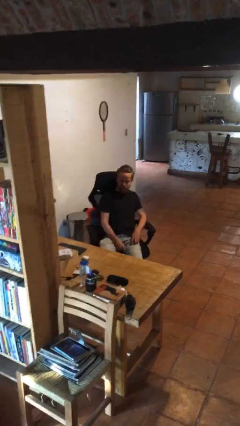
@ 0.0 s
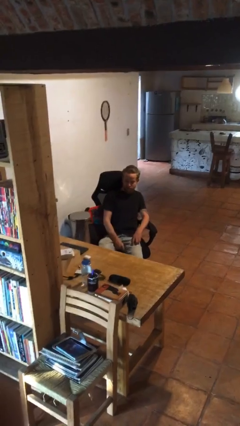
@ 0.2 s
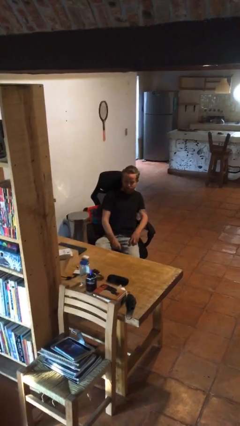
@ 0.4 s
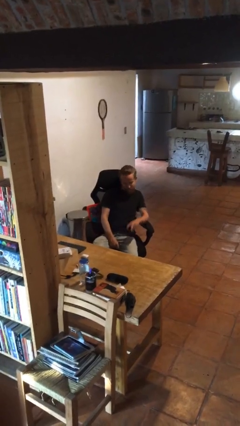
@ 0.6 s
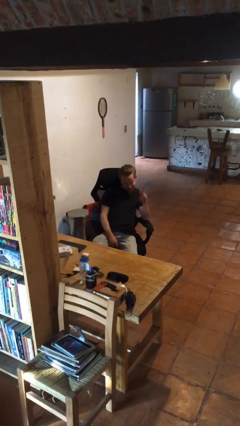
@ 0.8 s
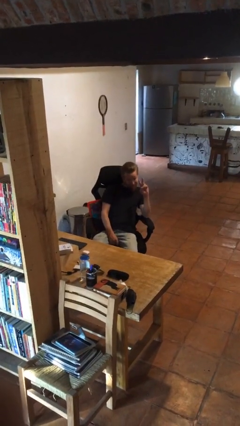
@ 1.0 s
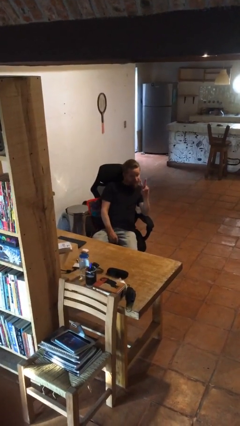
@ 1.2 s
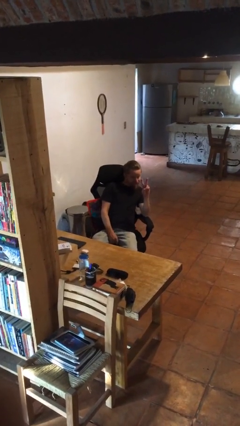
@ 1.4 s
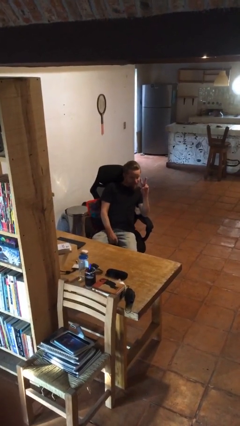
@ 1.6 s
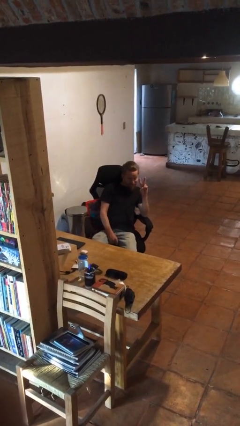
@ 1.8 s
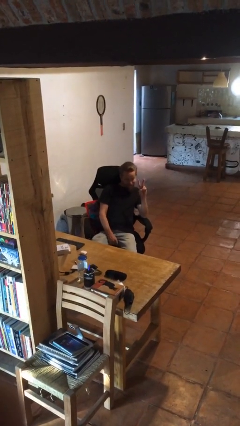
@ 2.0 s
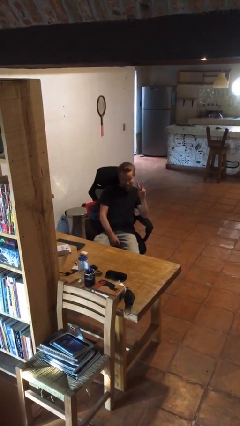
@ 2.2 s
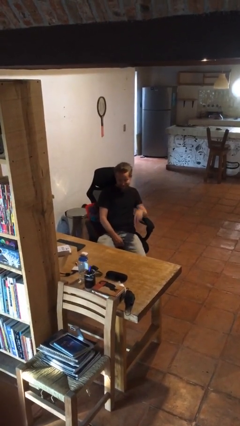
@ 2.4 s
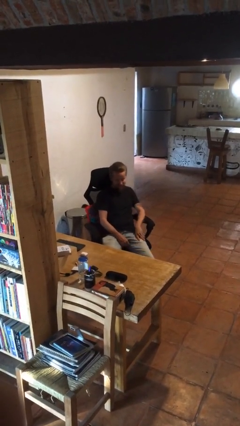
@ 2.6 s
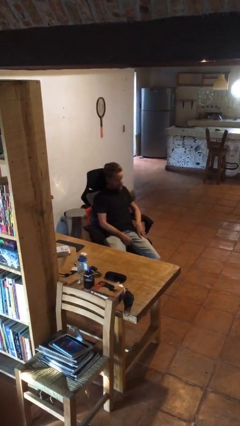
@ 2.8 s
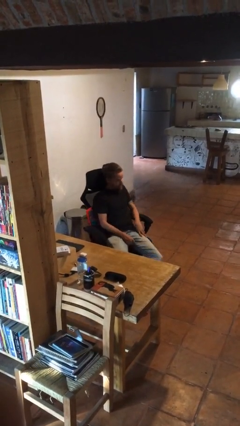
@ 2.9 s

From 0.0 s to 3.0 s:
person gestures peace

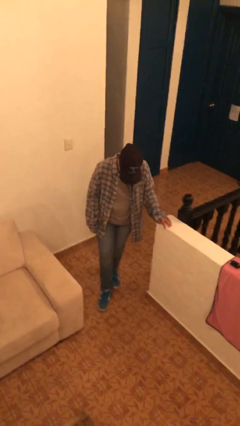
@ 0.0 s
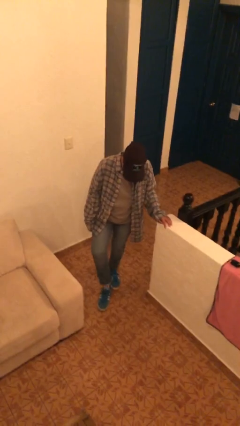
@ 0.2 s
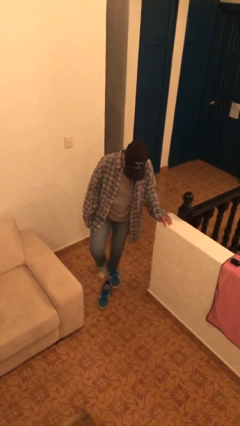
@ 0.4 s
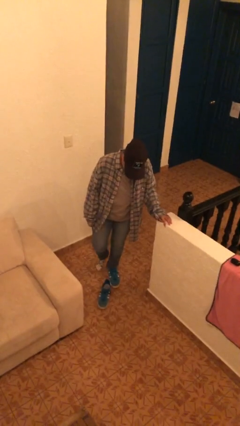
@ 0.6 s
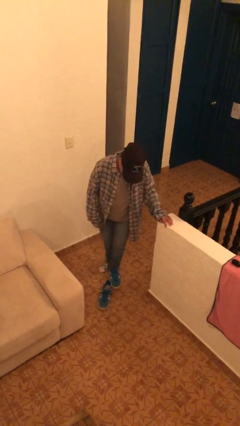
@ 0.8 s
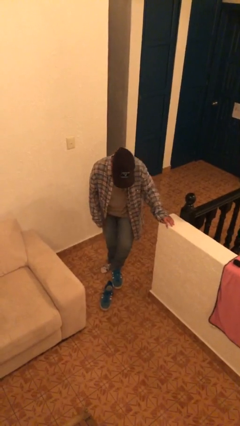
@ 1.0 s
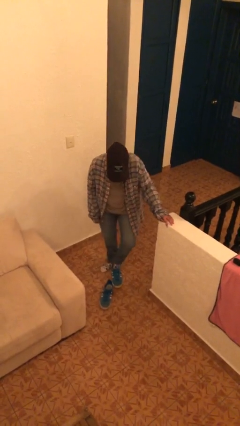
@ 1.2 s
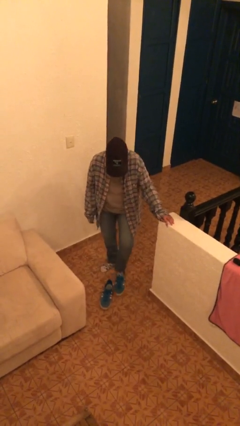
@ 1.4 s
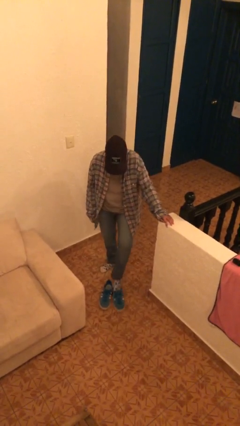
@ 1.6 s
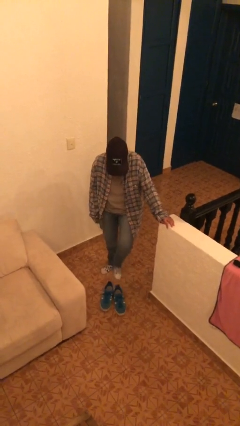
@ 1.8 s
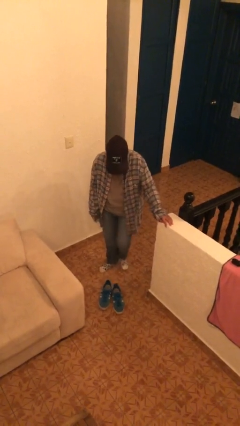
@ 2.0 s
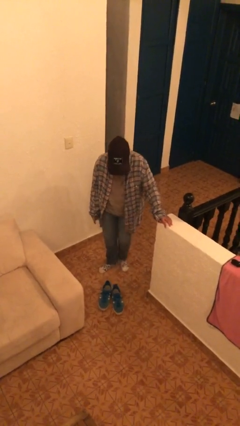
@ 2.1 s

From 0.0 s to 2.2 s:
person takes off shoes

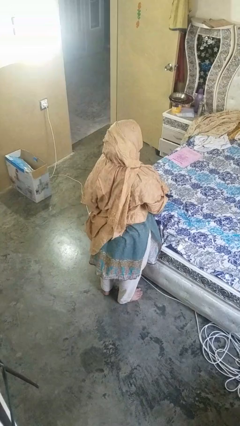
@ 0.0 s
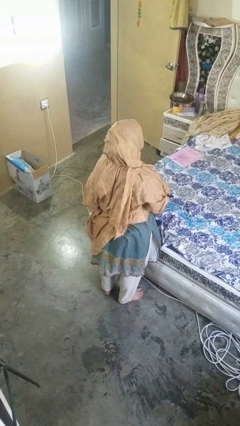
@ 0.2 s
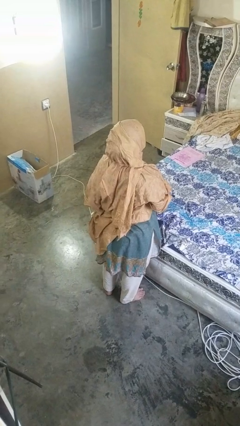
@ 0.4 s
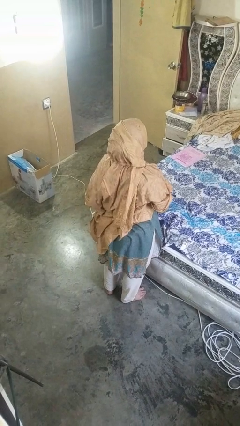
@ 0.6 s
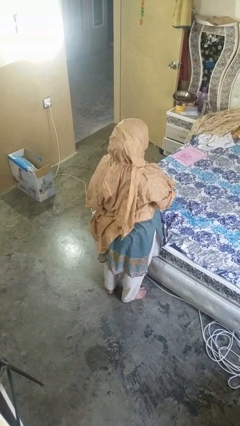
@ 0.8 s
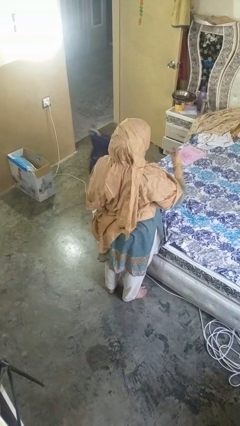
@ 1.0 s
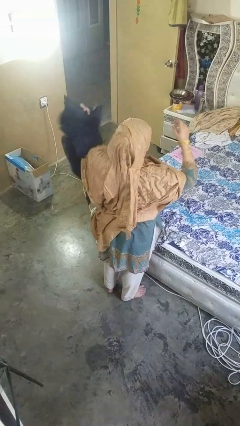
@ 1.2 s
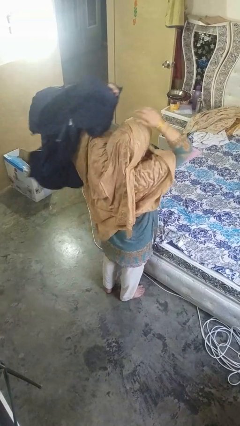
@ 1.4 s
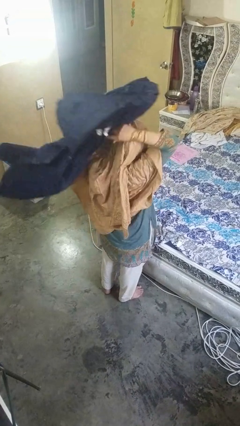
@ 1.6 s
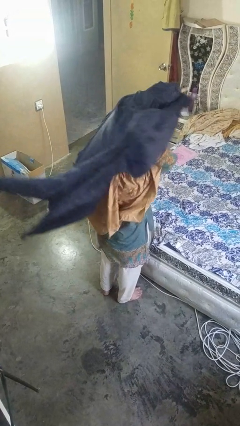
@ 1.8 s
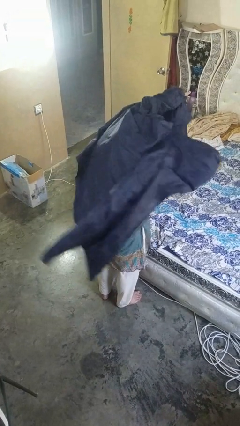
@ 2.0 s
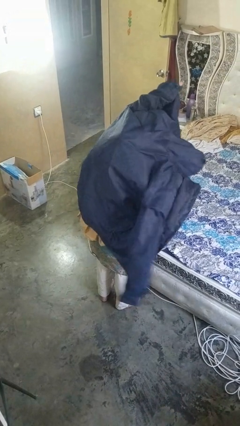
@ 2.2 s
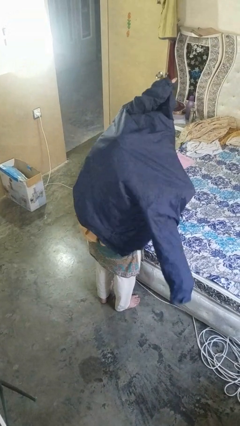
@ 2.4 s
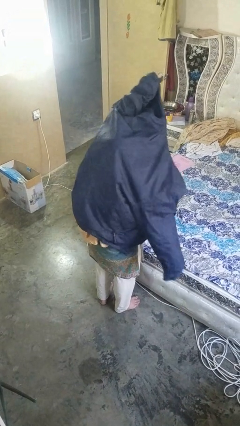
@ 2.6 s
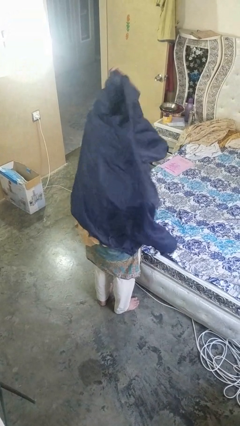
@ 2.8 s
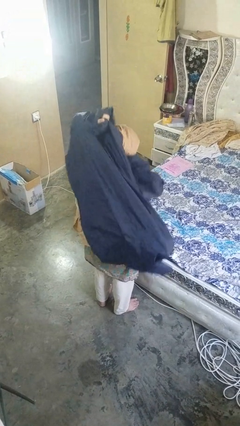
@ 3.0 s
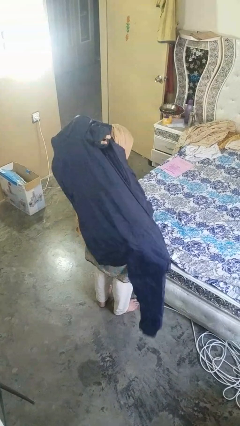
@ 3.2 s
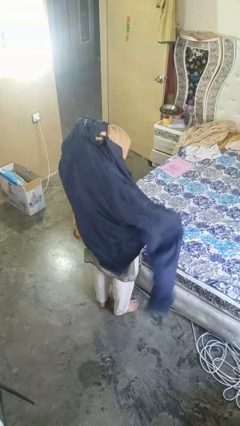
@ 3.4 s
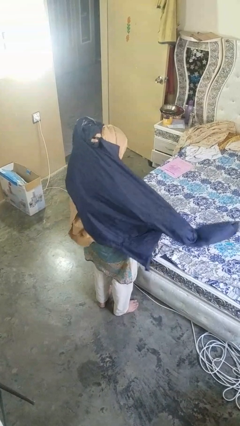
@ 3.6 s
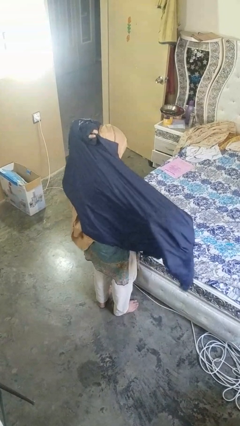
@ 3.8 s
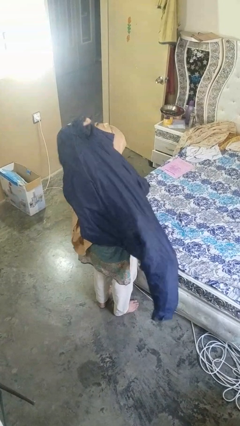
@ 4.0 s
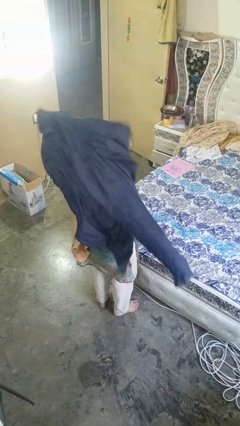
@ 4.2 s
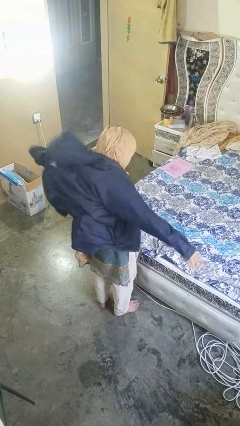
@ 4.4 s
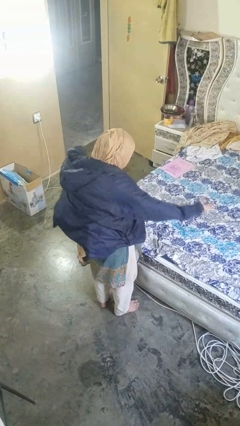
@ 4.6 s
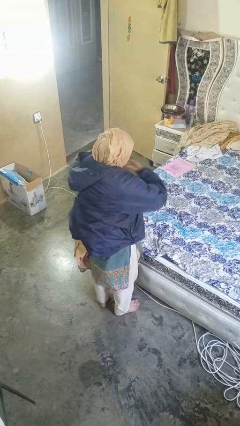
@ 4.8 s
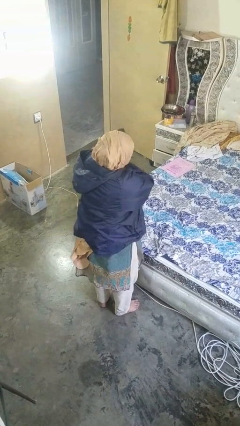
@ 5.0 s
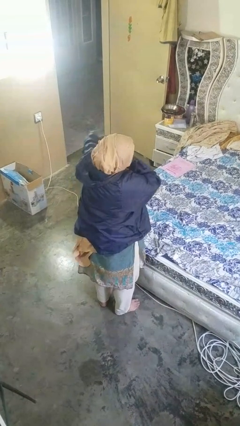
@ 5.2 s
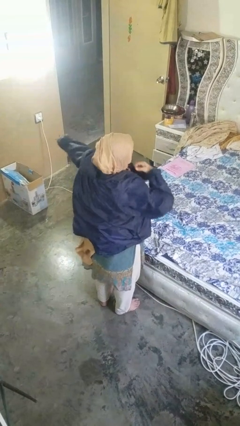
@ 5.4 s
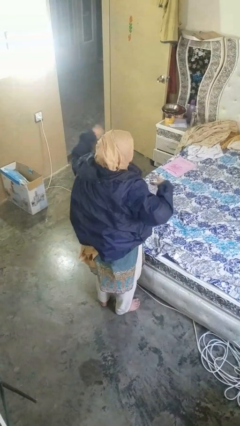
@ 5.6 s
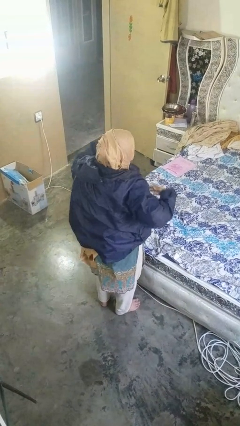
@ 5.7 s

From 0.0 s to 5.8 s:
person puts on jacket

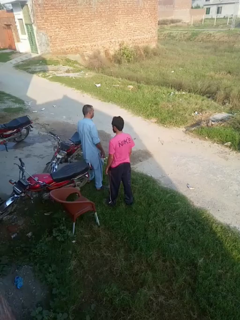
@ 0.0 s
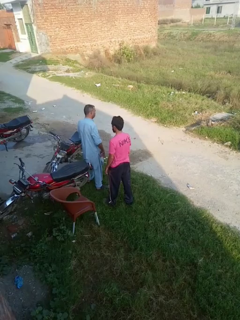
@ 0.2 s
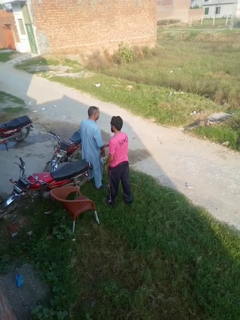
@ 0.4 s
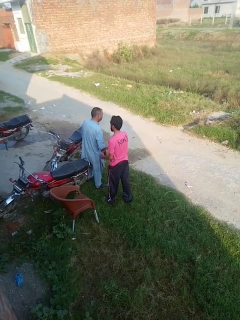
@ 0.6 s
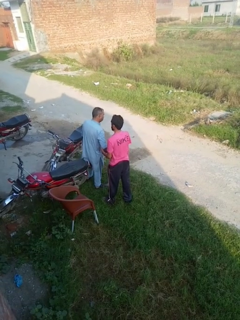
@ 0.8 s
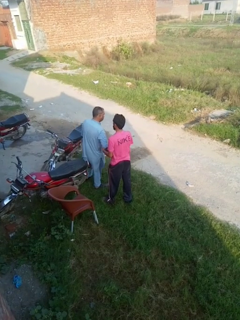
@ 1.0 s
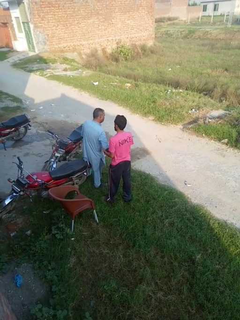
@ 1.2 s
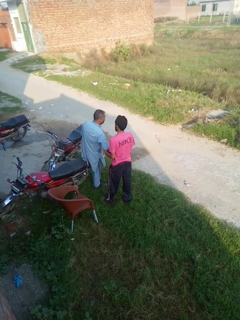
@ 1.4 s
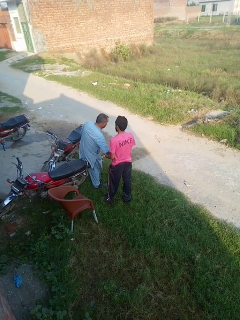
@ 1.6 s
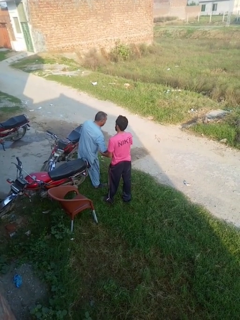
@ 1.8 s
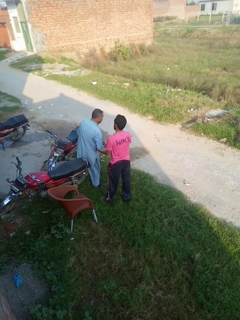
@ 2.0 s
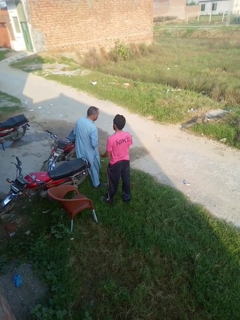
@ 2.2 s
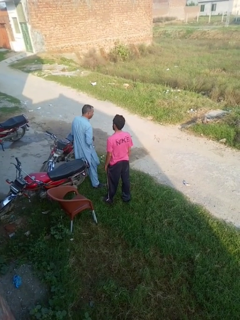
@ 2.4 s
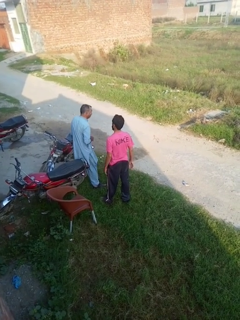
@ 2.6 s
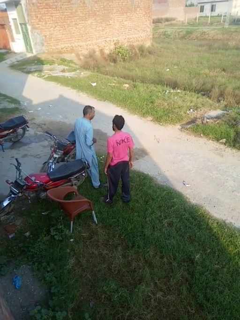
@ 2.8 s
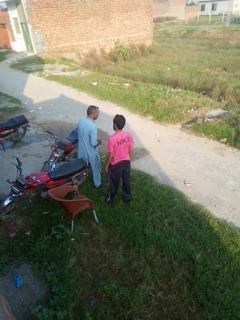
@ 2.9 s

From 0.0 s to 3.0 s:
person grabs person by forearm

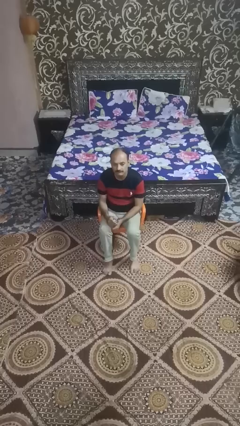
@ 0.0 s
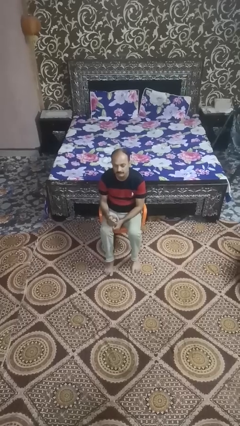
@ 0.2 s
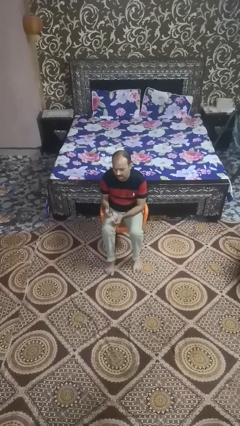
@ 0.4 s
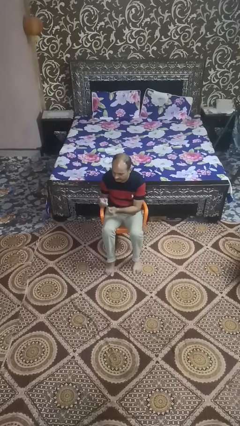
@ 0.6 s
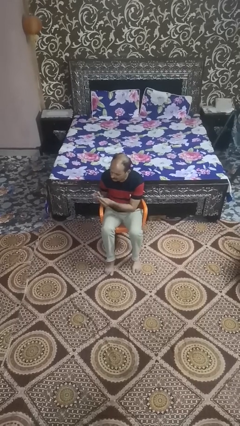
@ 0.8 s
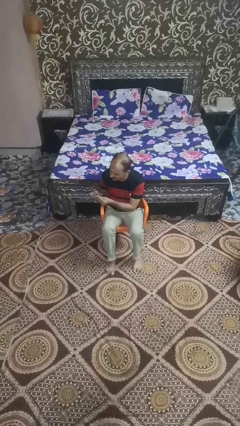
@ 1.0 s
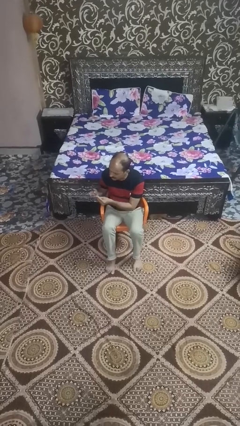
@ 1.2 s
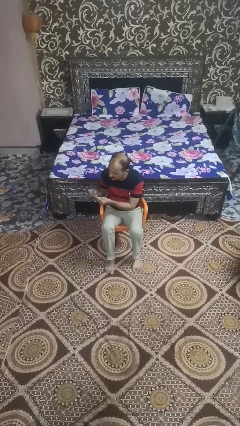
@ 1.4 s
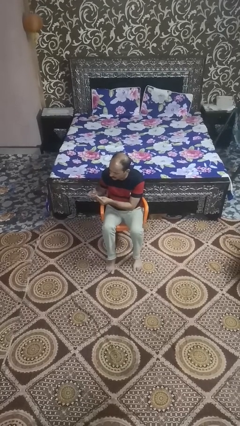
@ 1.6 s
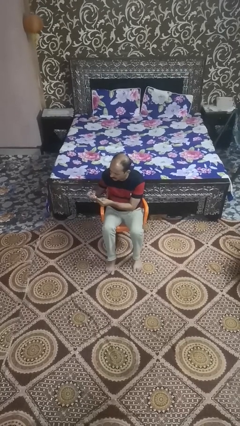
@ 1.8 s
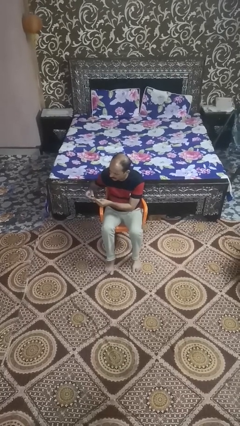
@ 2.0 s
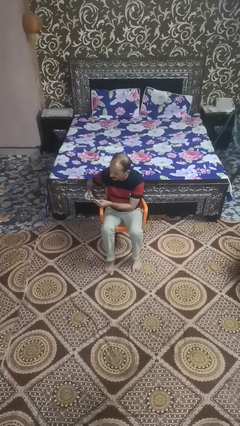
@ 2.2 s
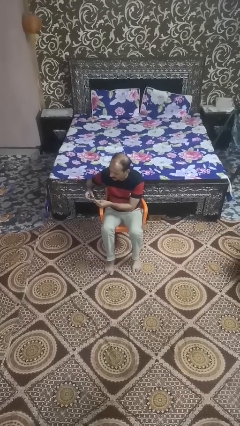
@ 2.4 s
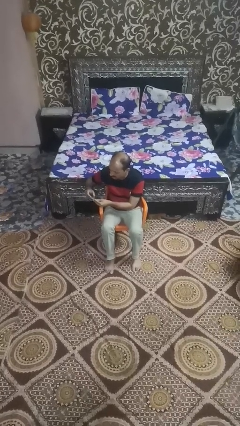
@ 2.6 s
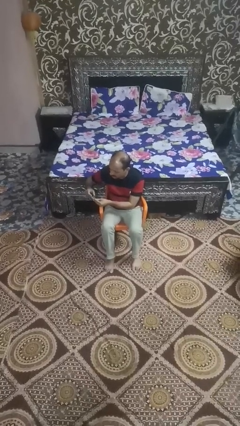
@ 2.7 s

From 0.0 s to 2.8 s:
person clips fingernails

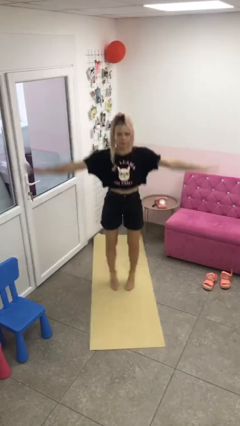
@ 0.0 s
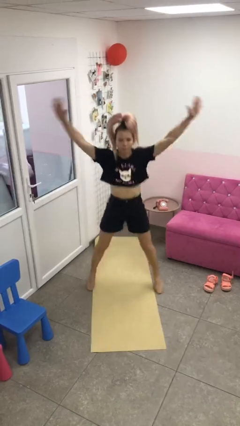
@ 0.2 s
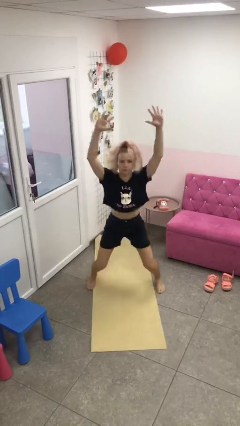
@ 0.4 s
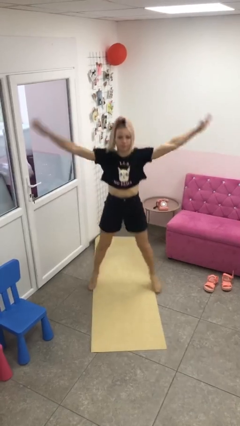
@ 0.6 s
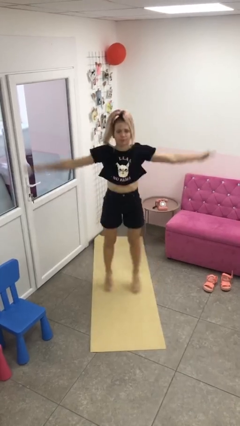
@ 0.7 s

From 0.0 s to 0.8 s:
person exercises with jumping jacks

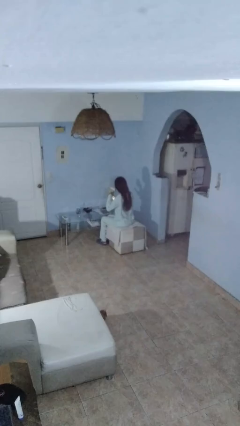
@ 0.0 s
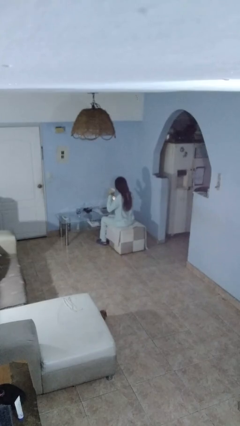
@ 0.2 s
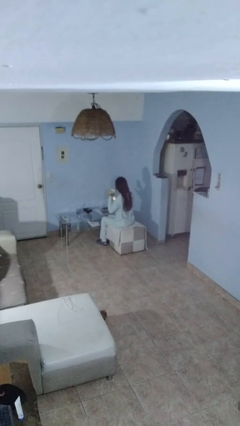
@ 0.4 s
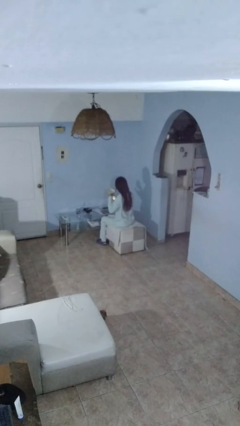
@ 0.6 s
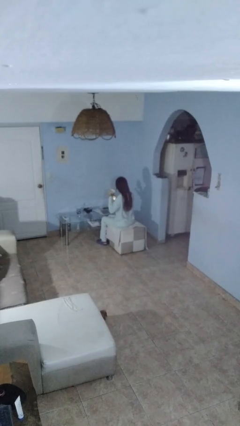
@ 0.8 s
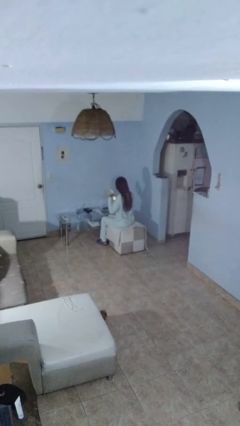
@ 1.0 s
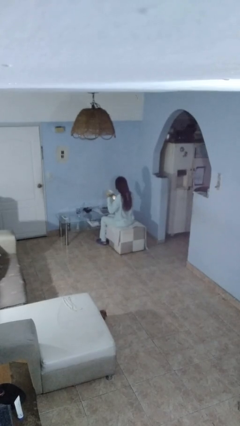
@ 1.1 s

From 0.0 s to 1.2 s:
person puts down object on table
